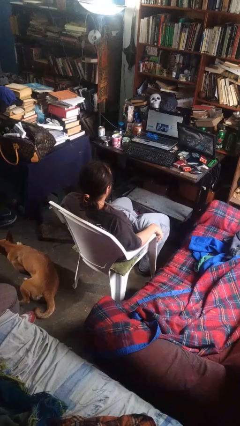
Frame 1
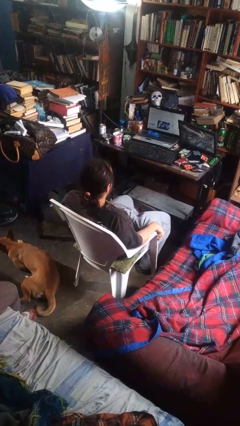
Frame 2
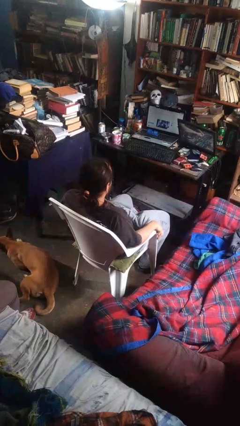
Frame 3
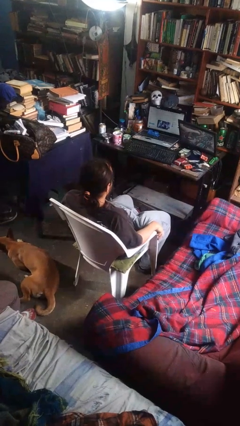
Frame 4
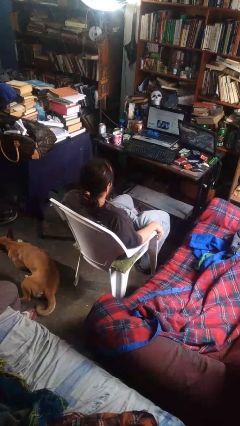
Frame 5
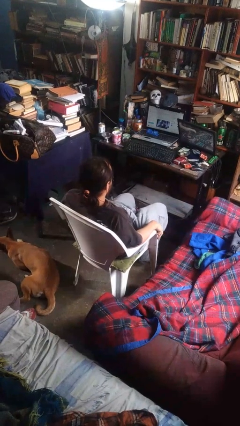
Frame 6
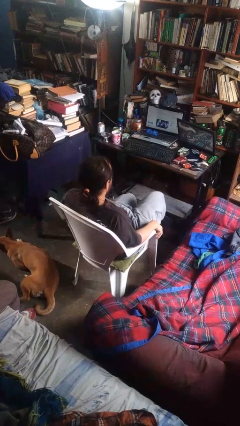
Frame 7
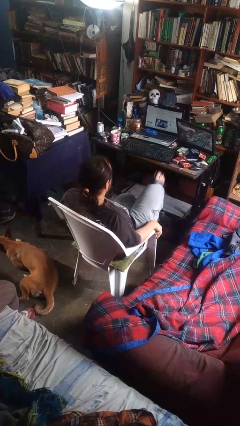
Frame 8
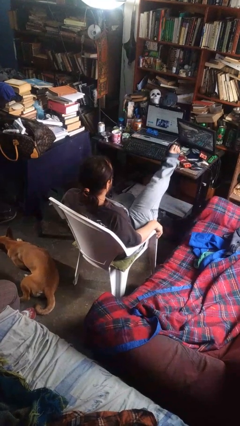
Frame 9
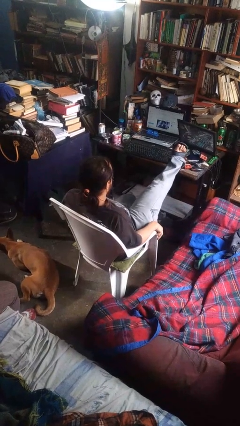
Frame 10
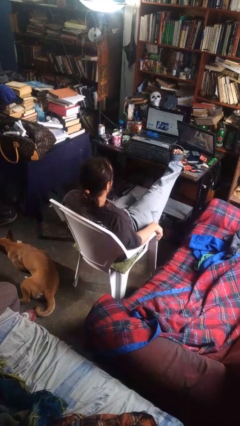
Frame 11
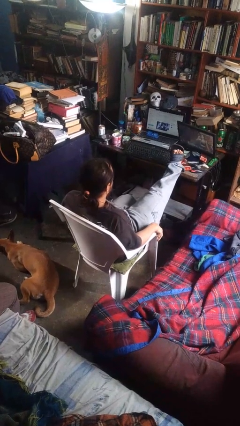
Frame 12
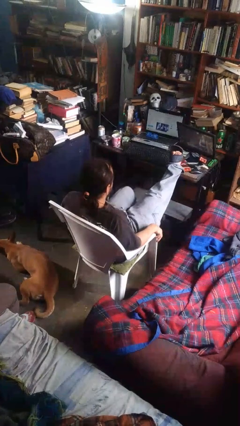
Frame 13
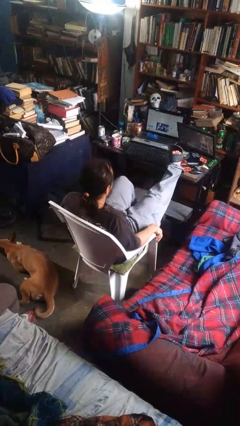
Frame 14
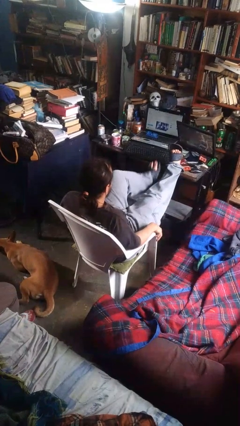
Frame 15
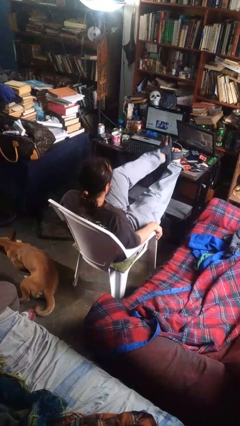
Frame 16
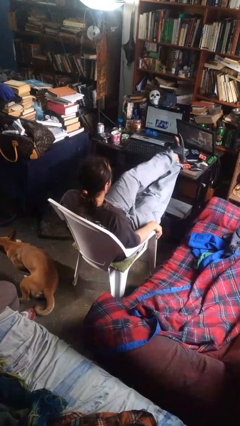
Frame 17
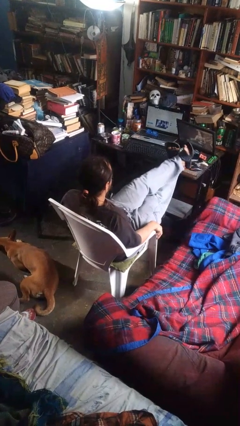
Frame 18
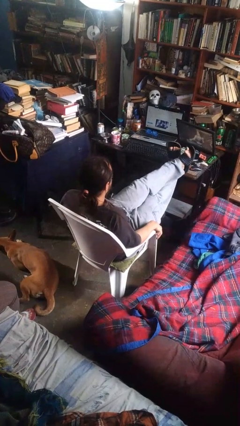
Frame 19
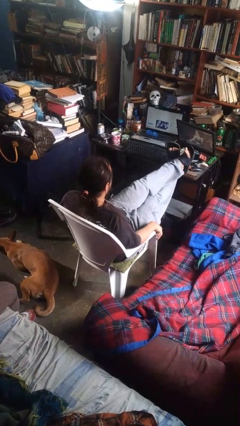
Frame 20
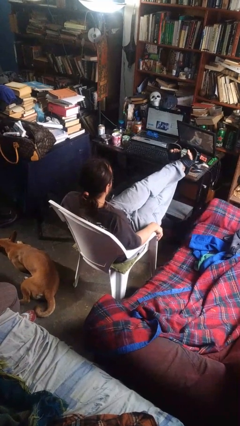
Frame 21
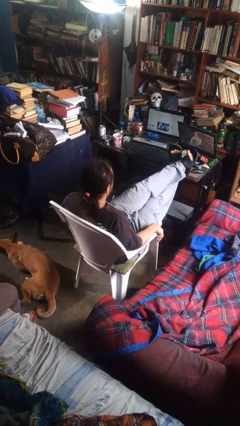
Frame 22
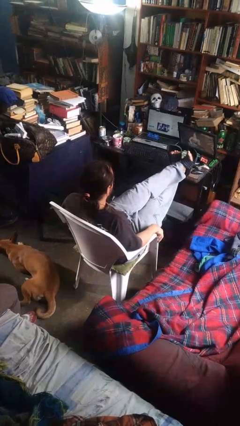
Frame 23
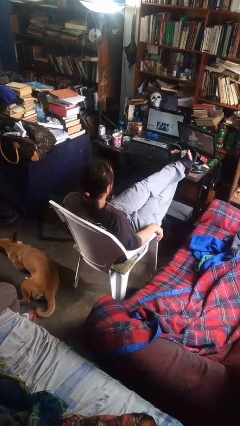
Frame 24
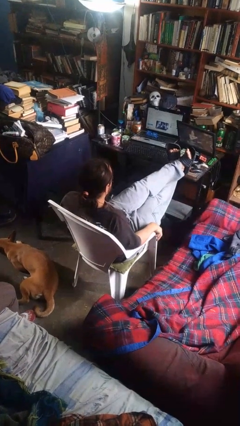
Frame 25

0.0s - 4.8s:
person puts feet up

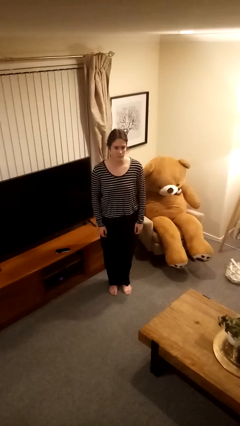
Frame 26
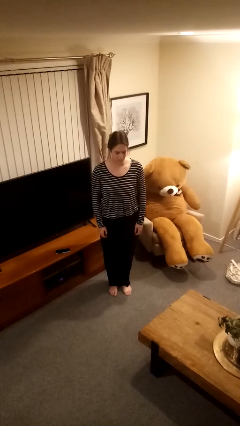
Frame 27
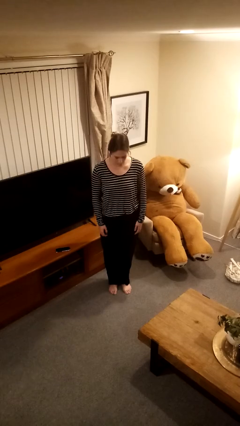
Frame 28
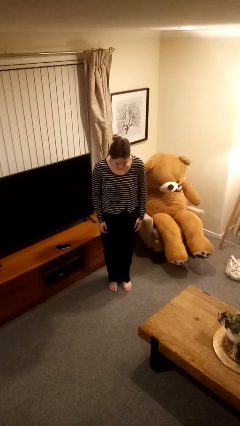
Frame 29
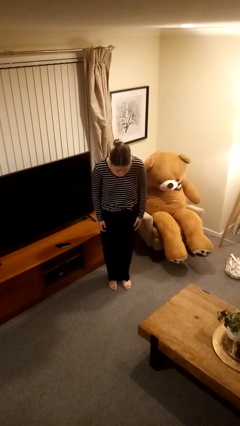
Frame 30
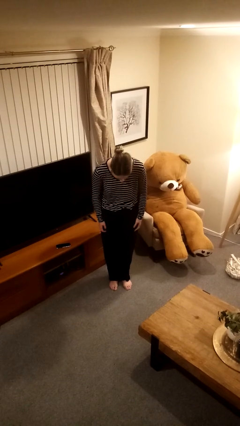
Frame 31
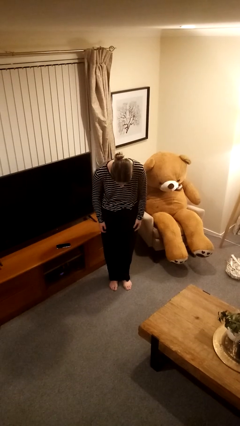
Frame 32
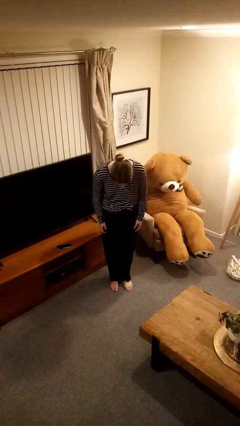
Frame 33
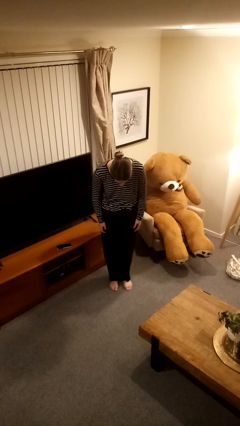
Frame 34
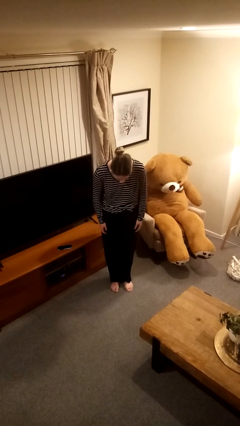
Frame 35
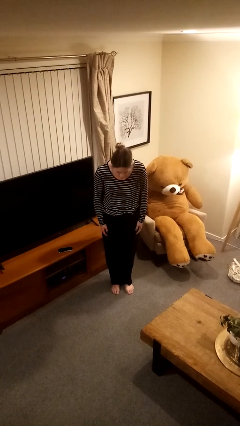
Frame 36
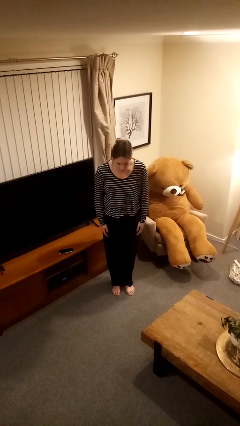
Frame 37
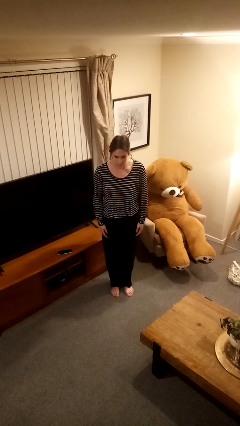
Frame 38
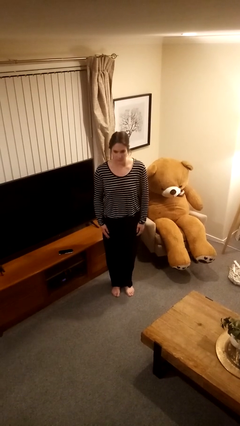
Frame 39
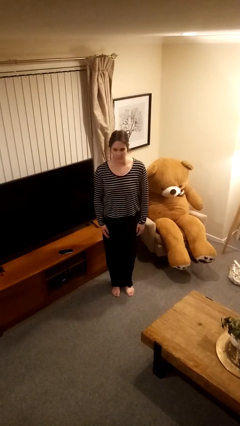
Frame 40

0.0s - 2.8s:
person bows

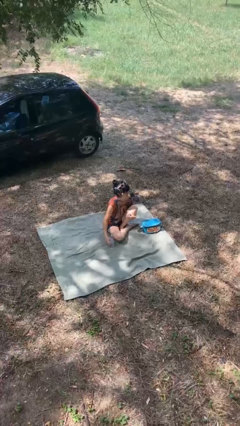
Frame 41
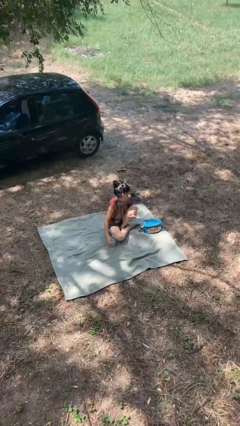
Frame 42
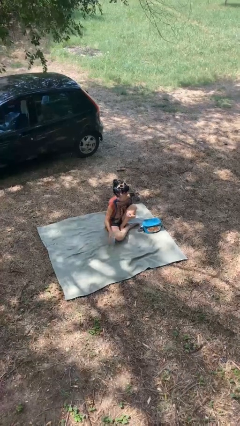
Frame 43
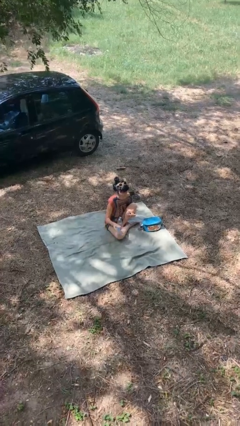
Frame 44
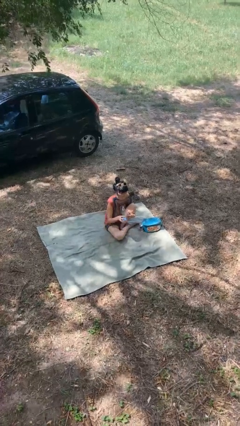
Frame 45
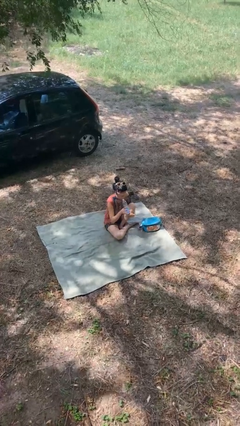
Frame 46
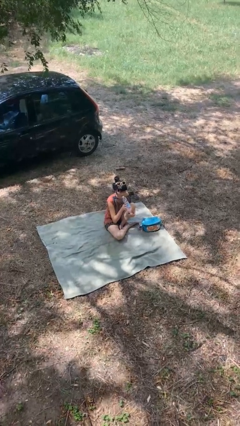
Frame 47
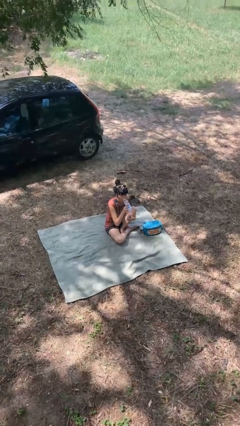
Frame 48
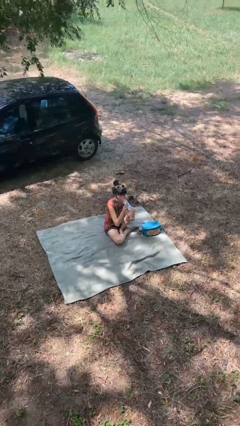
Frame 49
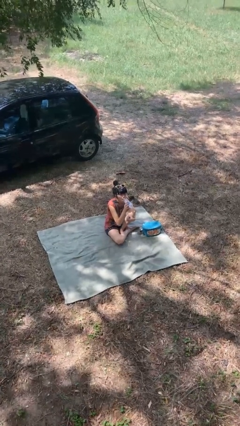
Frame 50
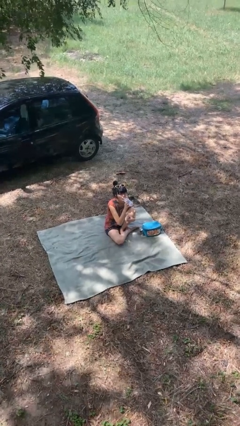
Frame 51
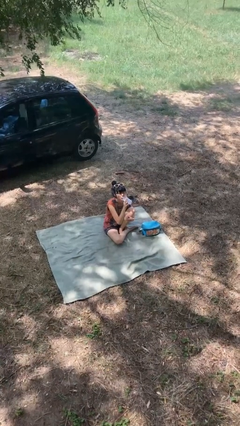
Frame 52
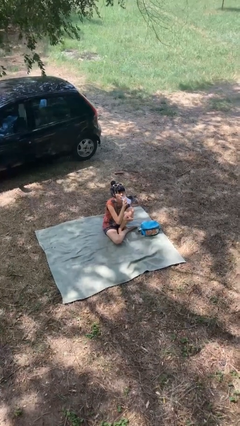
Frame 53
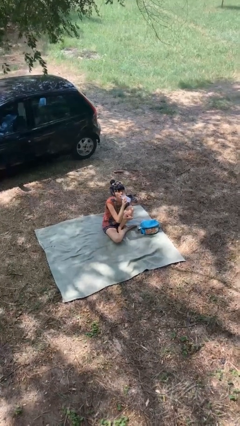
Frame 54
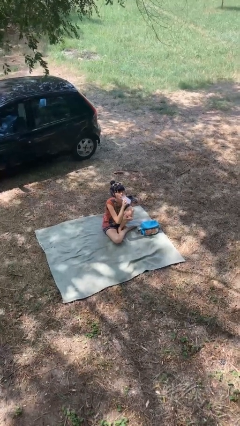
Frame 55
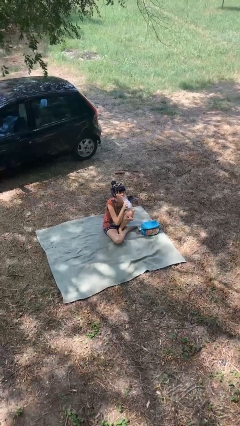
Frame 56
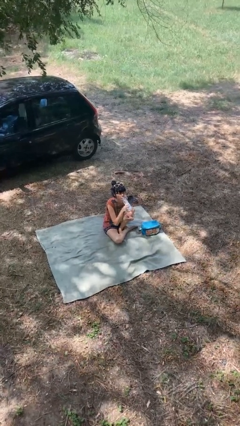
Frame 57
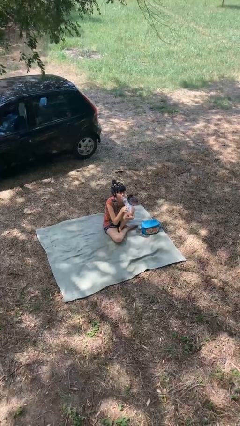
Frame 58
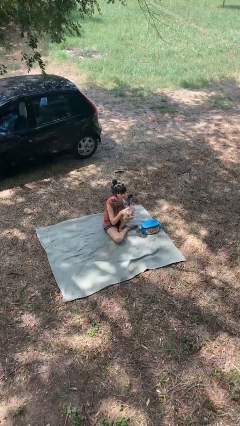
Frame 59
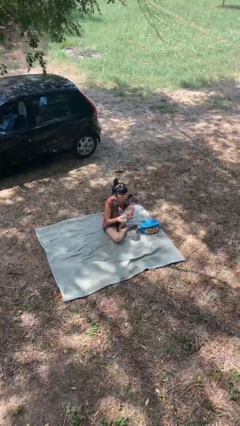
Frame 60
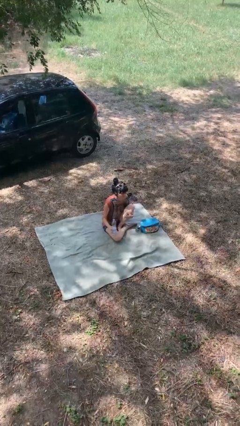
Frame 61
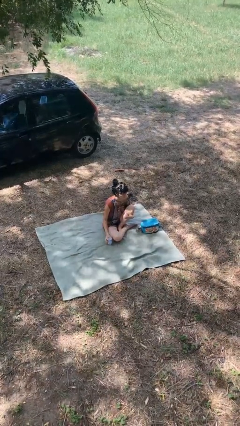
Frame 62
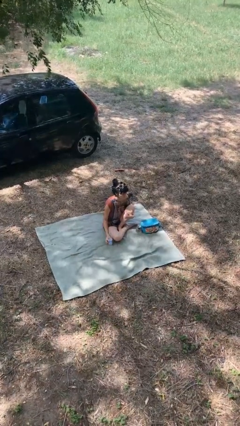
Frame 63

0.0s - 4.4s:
person drinks from bottle

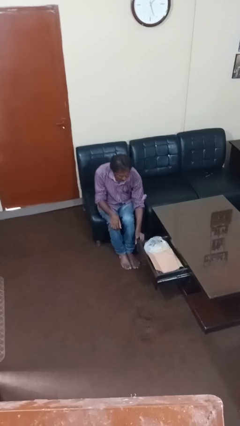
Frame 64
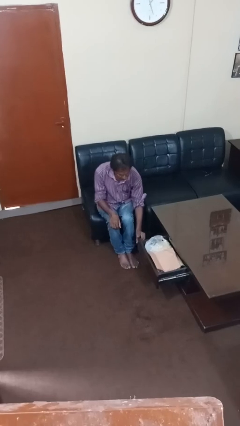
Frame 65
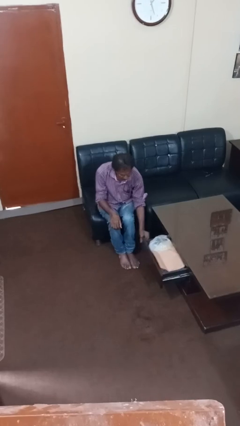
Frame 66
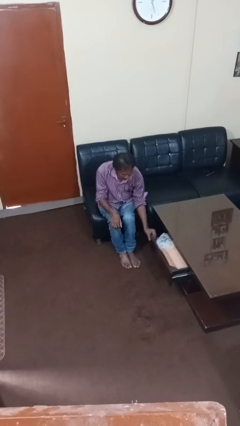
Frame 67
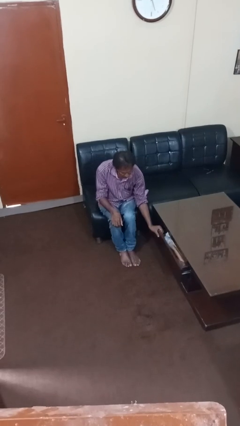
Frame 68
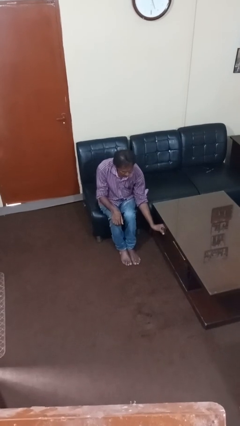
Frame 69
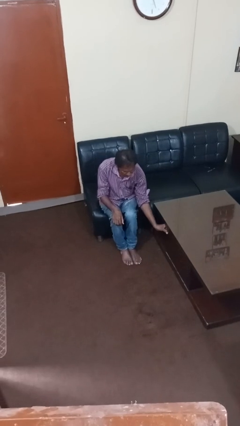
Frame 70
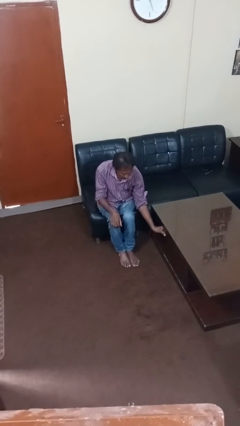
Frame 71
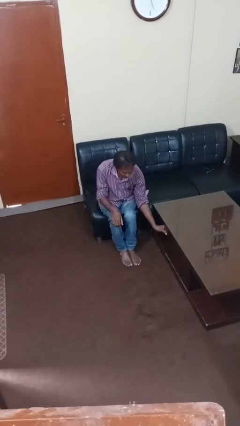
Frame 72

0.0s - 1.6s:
person closes dresser drawer

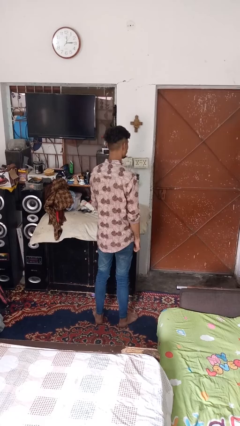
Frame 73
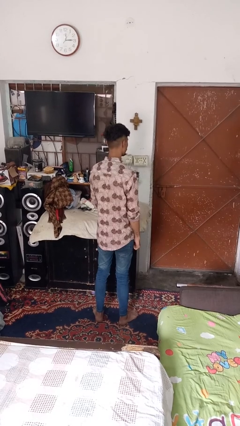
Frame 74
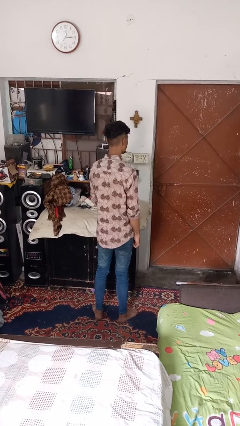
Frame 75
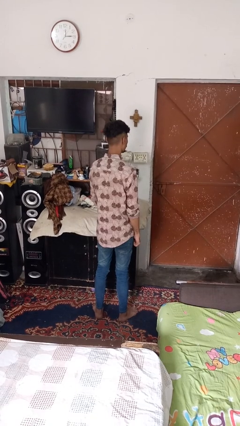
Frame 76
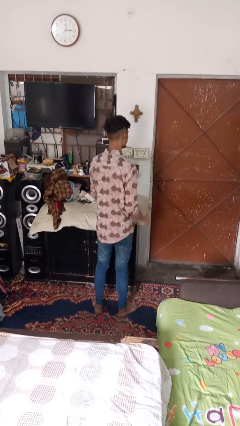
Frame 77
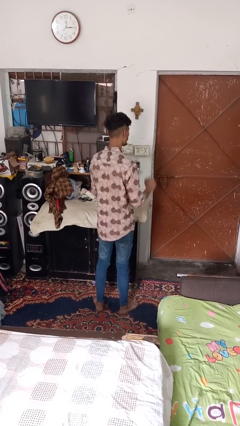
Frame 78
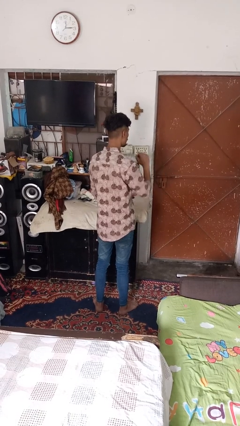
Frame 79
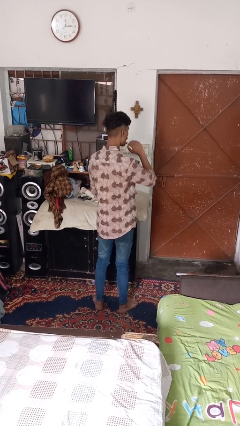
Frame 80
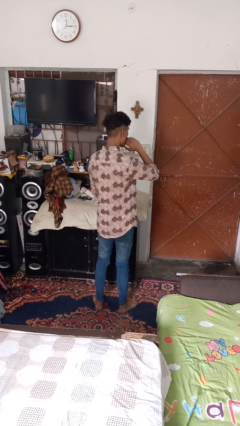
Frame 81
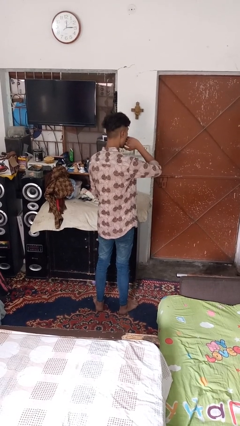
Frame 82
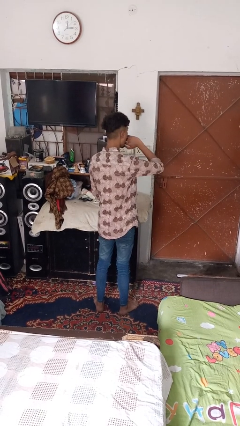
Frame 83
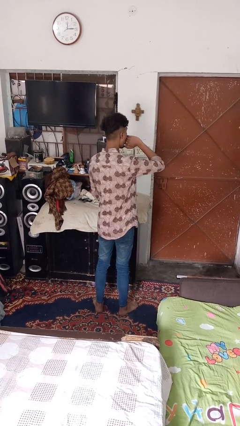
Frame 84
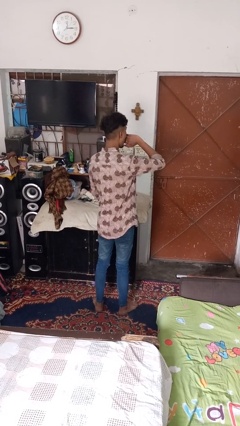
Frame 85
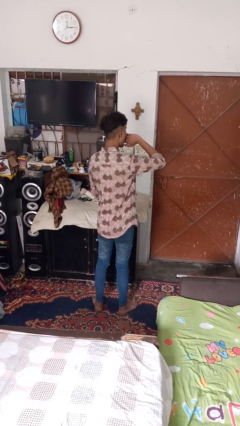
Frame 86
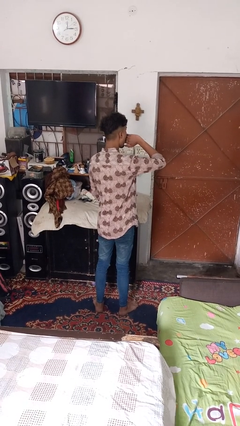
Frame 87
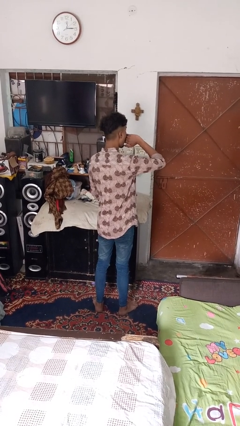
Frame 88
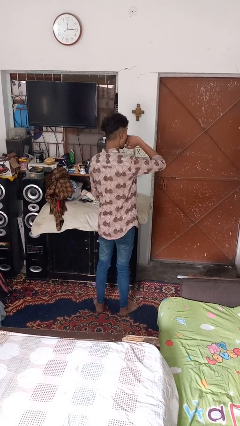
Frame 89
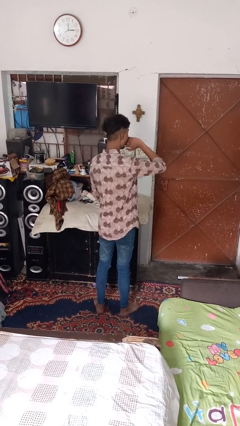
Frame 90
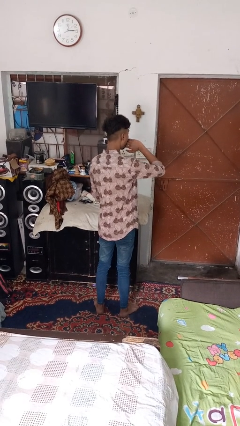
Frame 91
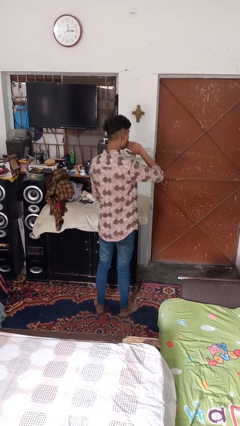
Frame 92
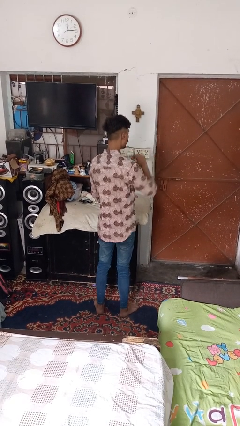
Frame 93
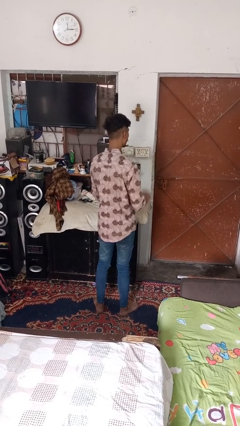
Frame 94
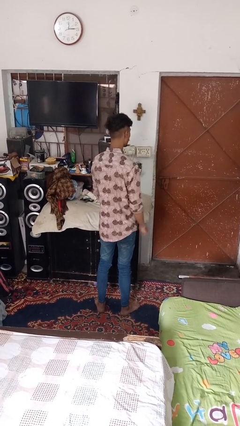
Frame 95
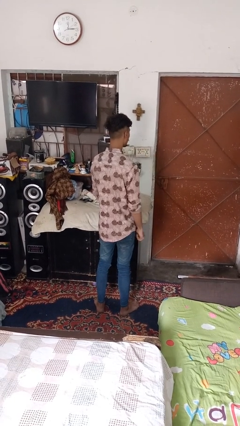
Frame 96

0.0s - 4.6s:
person yawns
